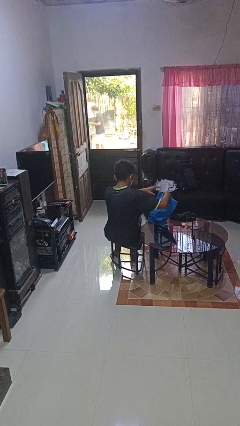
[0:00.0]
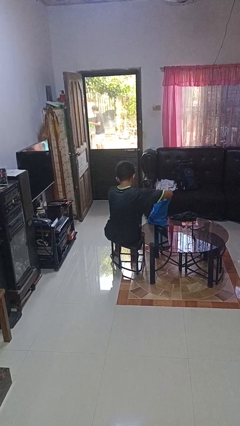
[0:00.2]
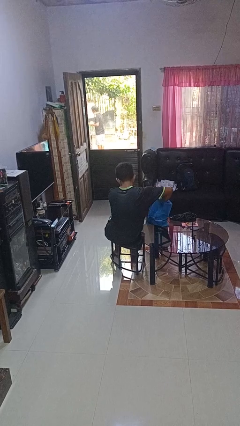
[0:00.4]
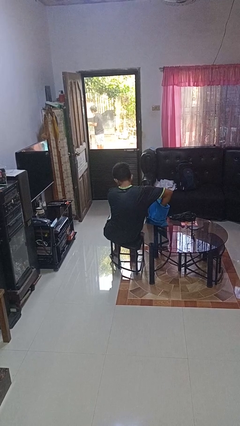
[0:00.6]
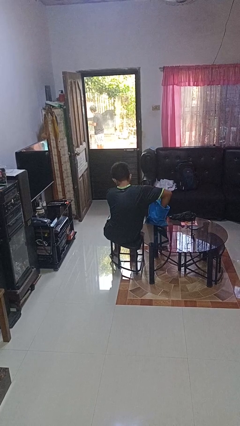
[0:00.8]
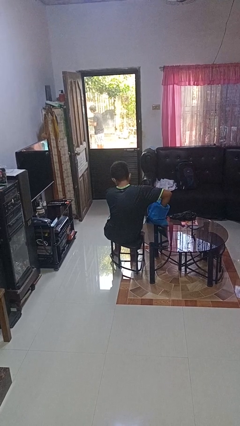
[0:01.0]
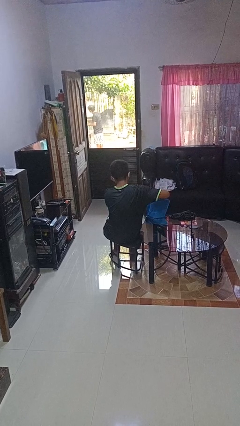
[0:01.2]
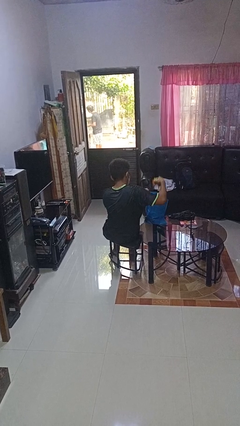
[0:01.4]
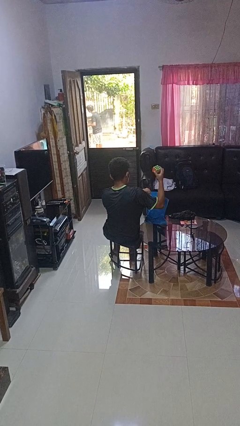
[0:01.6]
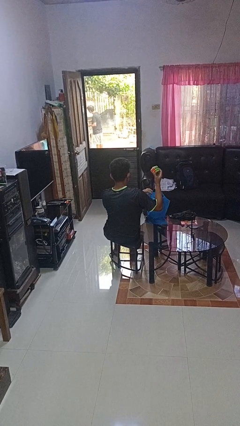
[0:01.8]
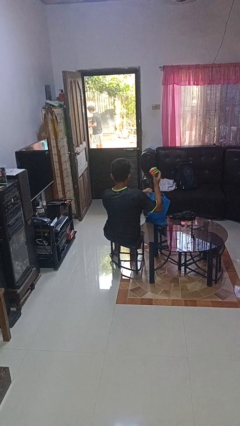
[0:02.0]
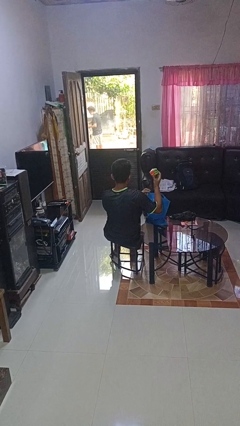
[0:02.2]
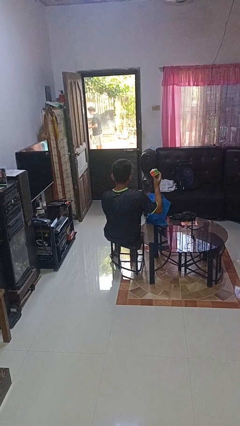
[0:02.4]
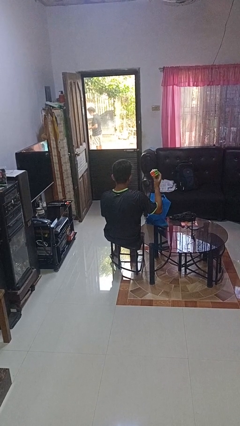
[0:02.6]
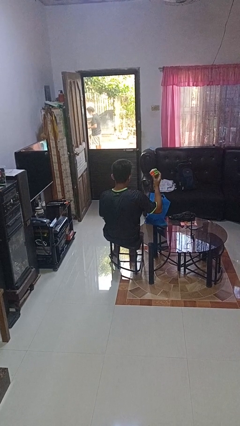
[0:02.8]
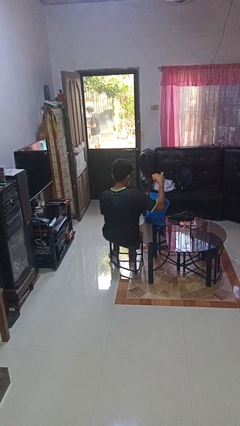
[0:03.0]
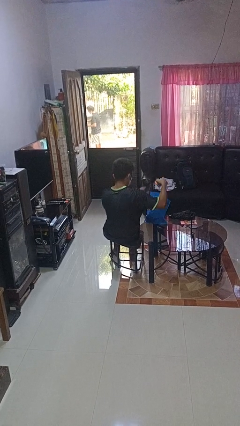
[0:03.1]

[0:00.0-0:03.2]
person takes object from bag

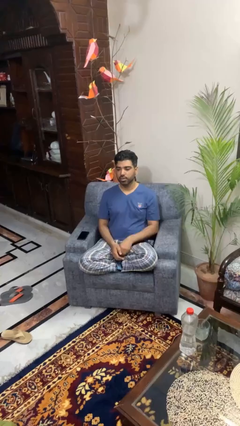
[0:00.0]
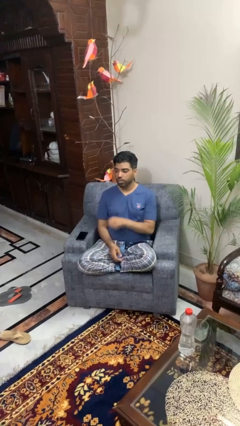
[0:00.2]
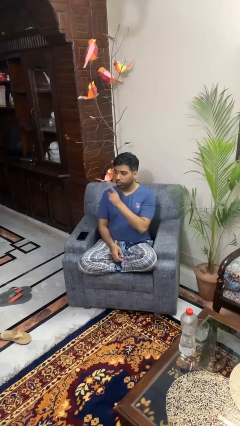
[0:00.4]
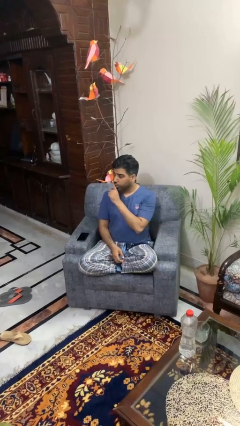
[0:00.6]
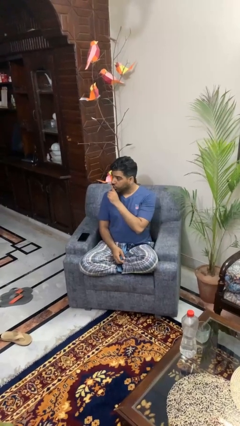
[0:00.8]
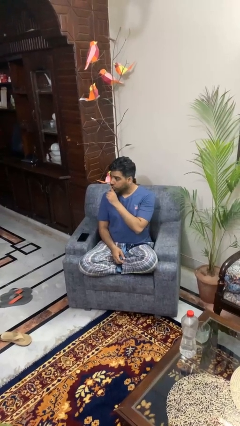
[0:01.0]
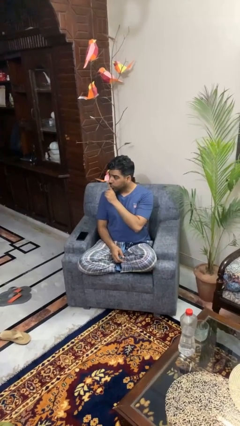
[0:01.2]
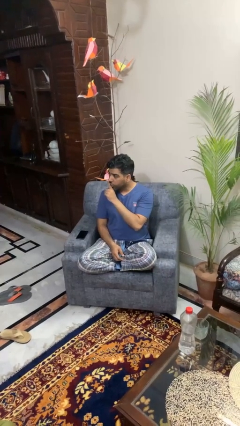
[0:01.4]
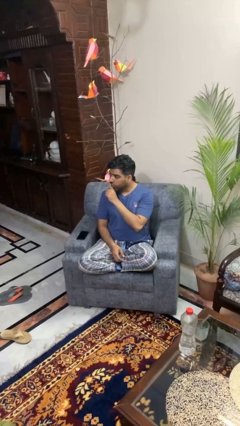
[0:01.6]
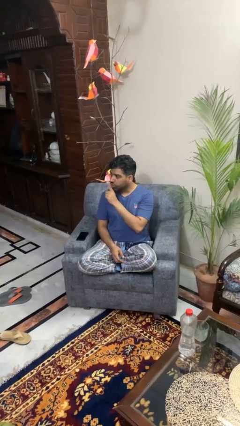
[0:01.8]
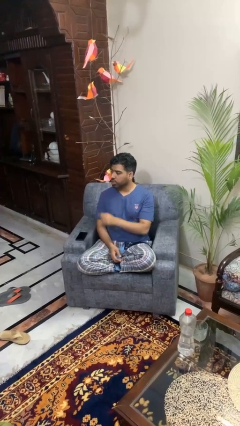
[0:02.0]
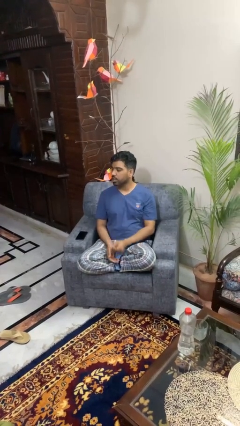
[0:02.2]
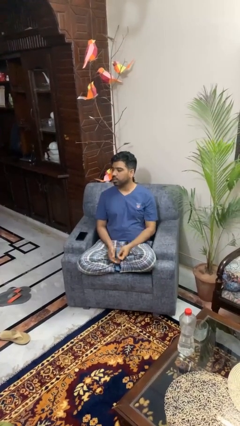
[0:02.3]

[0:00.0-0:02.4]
person gestures be quiet

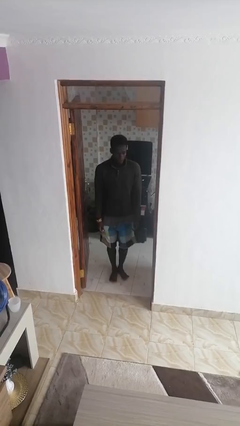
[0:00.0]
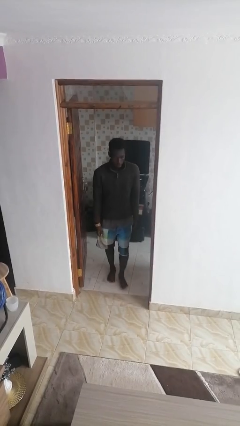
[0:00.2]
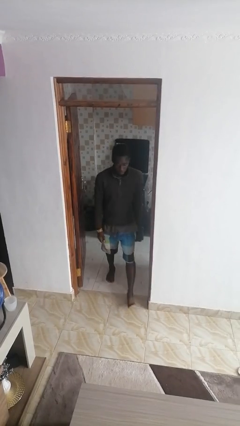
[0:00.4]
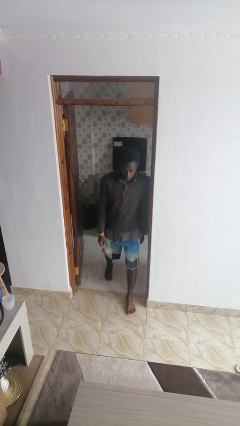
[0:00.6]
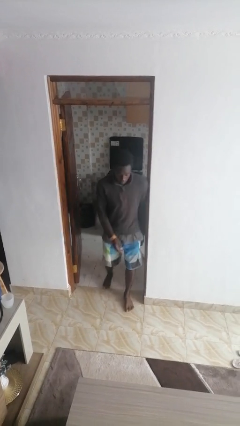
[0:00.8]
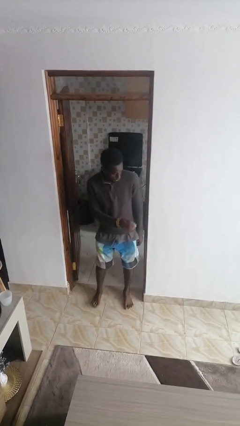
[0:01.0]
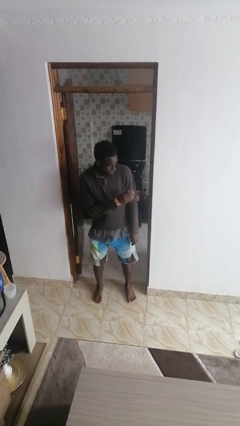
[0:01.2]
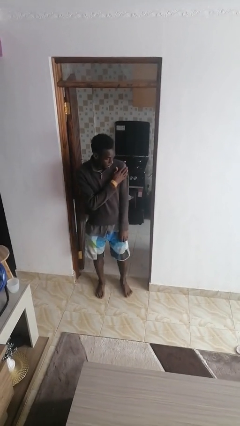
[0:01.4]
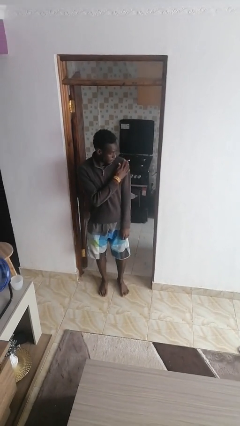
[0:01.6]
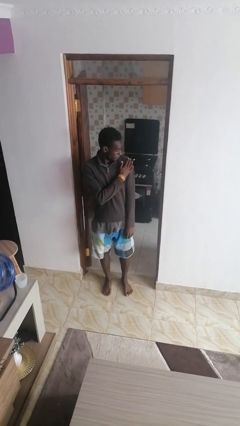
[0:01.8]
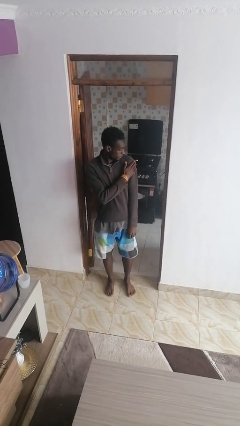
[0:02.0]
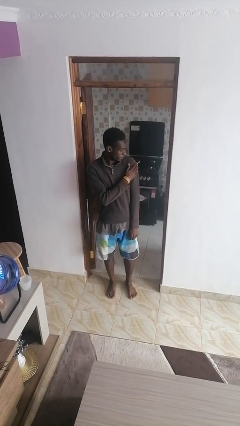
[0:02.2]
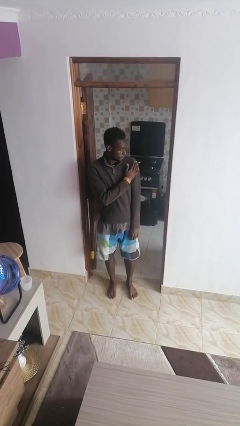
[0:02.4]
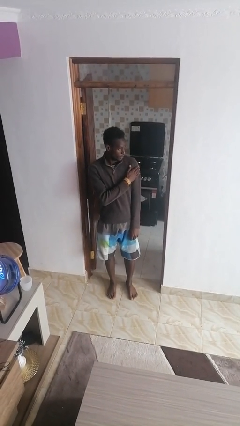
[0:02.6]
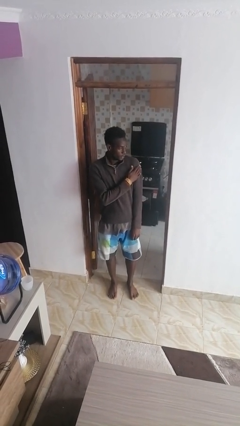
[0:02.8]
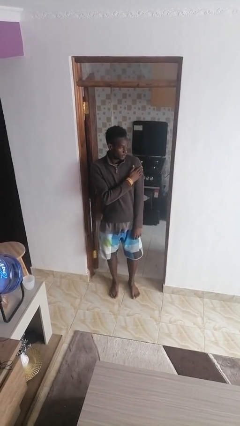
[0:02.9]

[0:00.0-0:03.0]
person bumps into wall

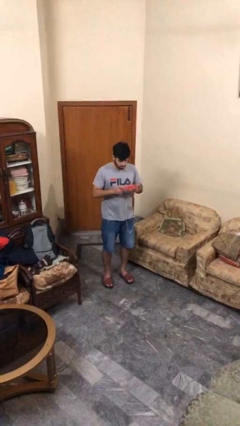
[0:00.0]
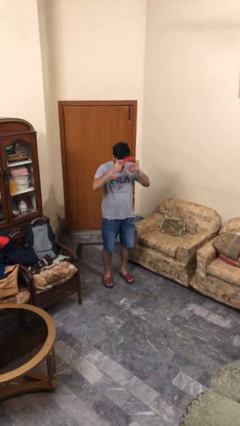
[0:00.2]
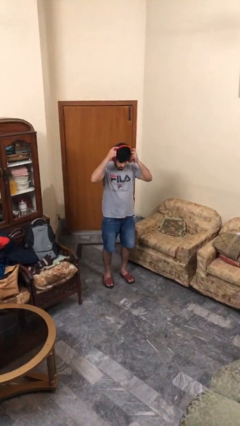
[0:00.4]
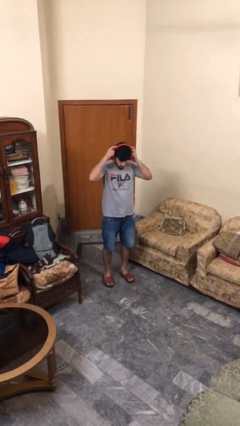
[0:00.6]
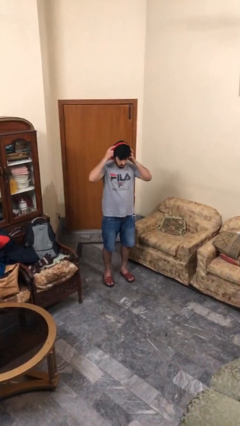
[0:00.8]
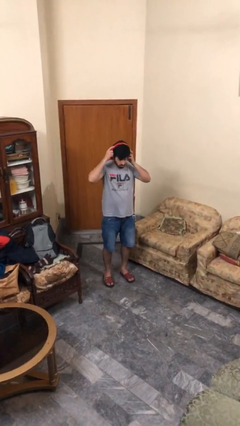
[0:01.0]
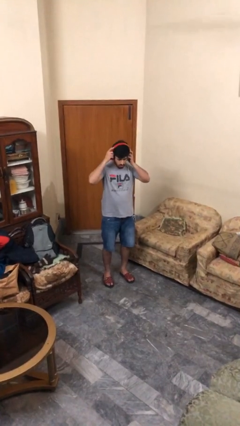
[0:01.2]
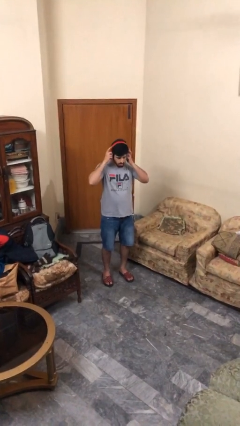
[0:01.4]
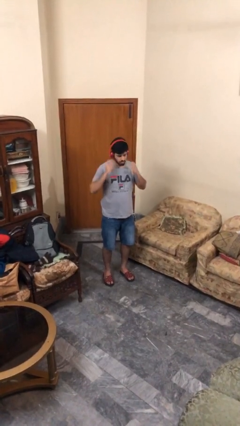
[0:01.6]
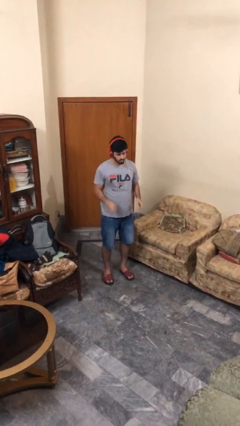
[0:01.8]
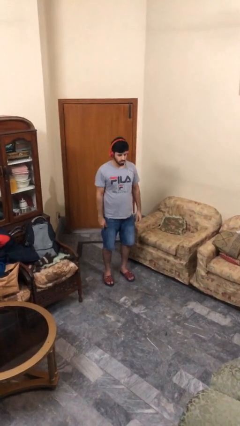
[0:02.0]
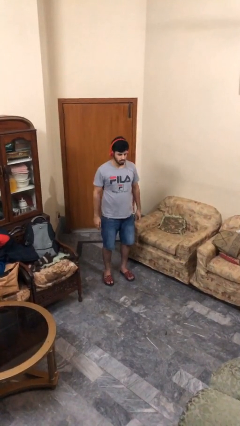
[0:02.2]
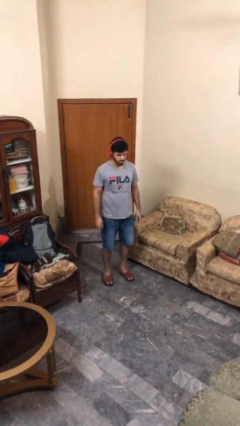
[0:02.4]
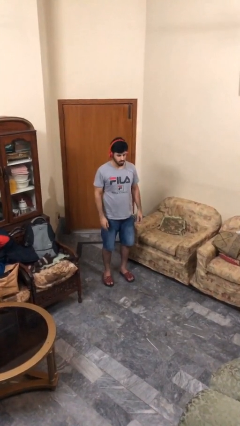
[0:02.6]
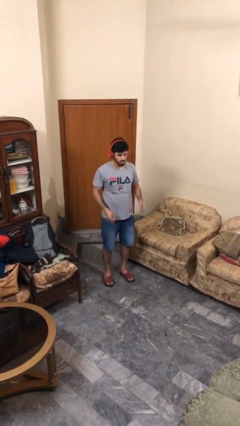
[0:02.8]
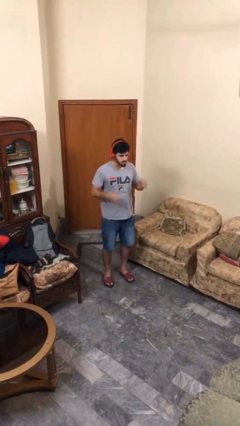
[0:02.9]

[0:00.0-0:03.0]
person puts on headphones

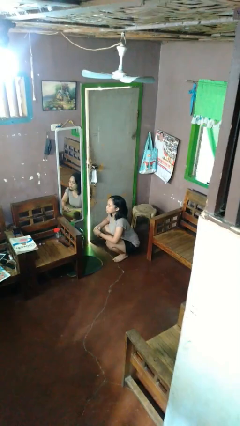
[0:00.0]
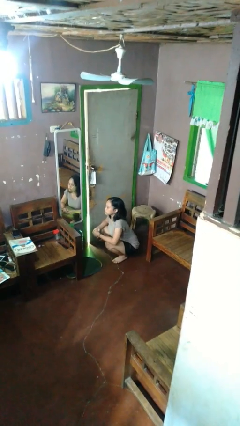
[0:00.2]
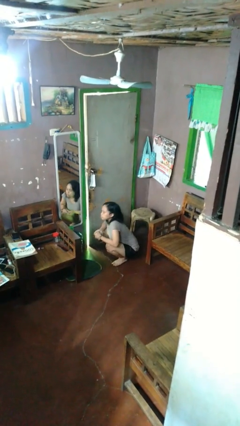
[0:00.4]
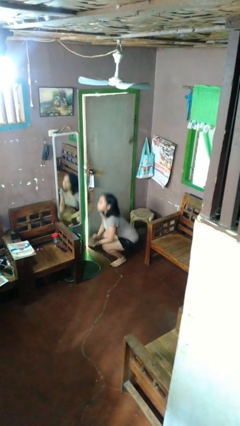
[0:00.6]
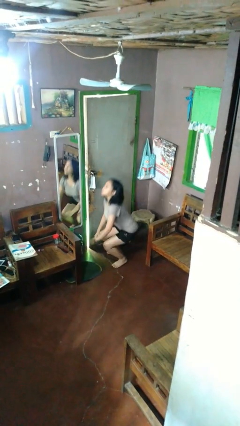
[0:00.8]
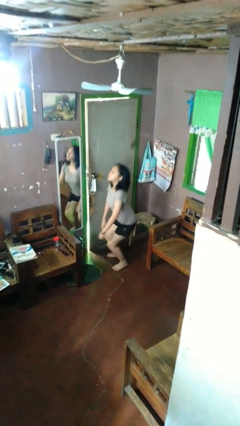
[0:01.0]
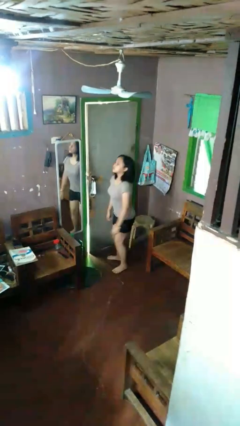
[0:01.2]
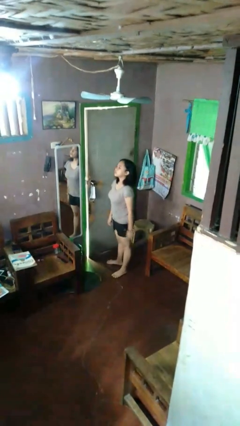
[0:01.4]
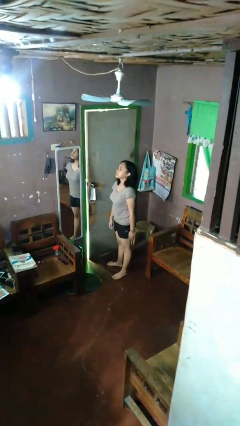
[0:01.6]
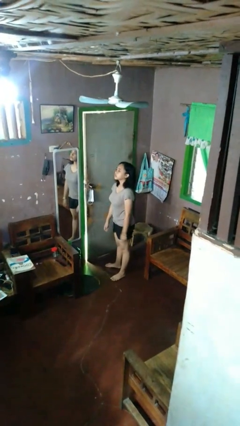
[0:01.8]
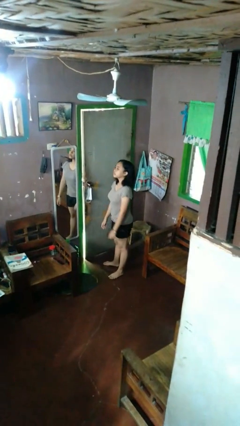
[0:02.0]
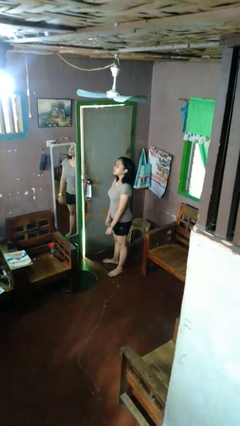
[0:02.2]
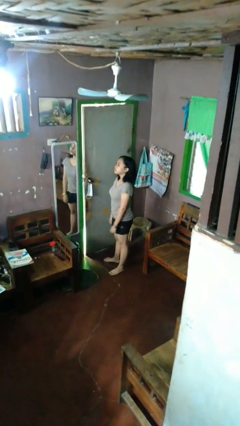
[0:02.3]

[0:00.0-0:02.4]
person stands up

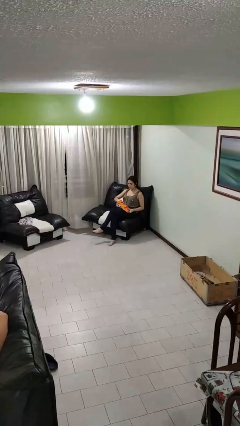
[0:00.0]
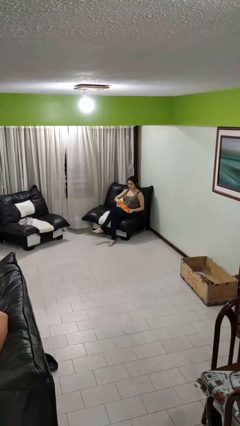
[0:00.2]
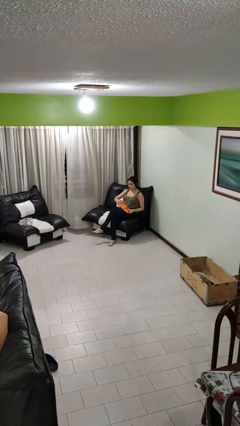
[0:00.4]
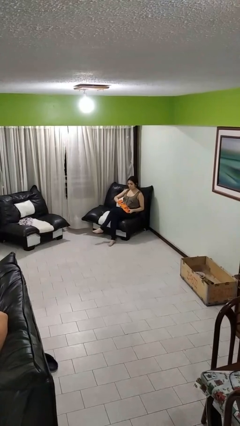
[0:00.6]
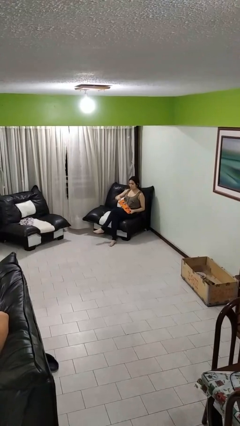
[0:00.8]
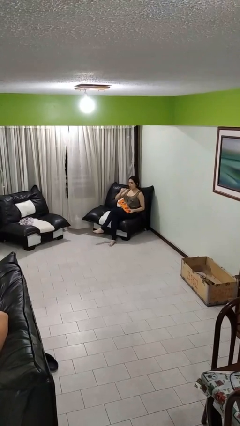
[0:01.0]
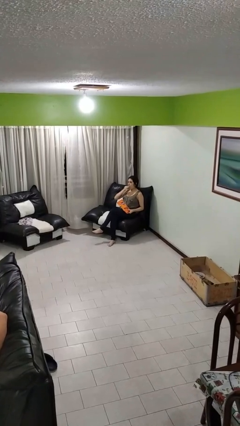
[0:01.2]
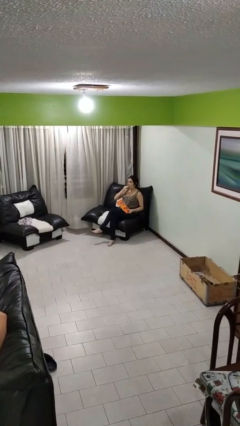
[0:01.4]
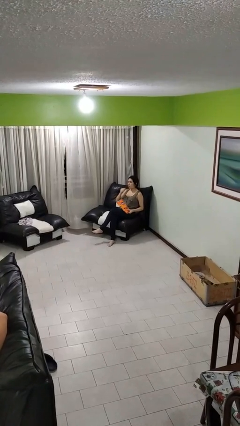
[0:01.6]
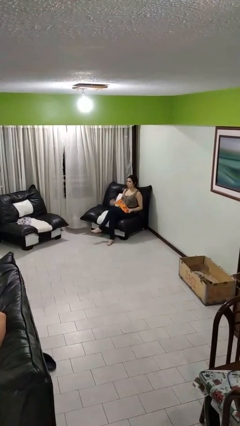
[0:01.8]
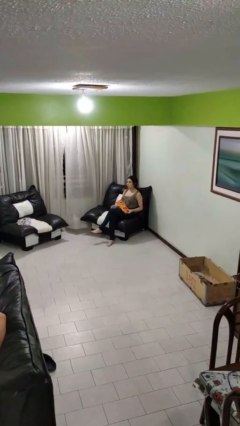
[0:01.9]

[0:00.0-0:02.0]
person eats snack from bag

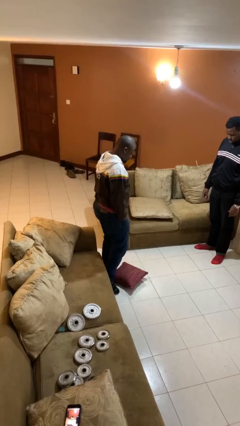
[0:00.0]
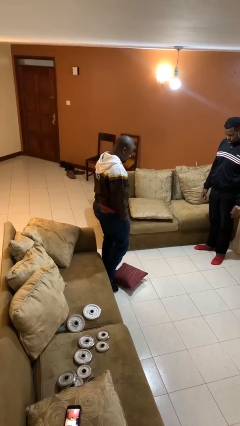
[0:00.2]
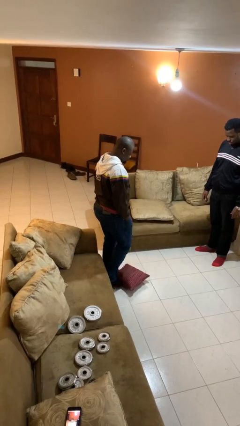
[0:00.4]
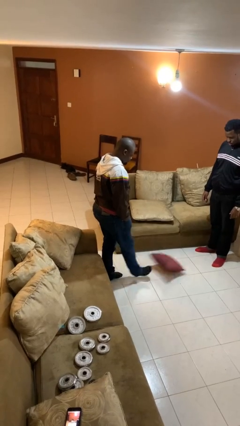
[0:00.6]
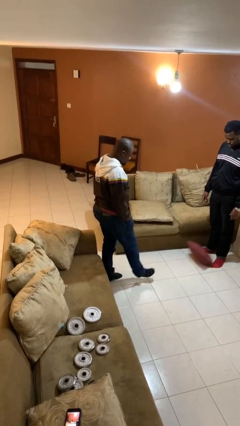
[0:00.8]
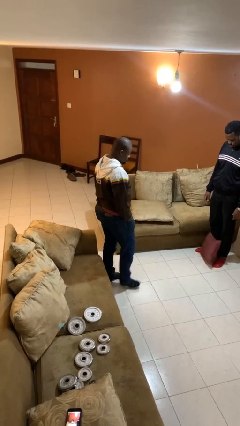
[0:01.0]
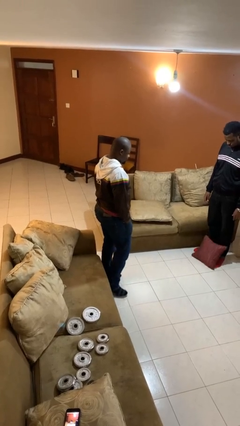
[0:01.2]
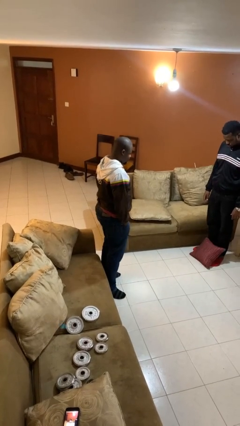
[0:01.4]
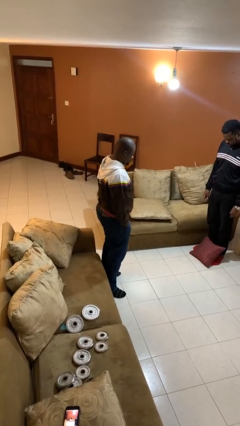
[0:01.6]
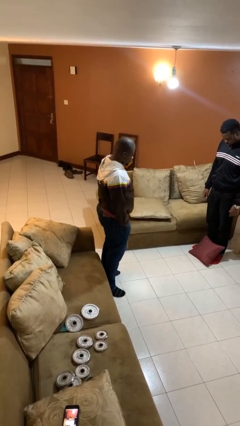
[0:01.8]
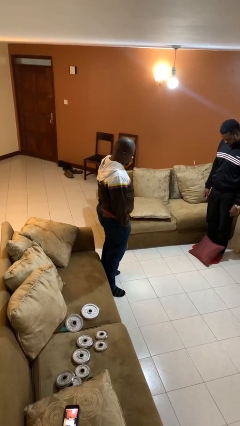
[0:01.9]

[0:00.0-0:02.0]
person kicks object to person
